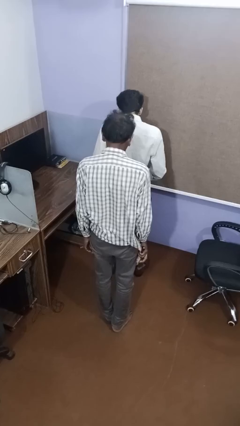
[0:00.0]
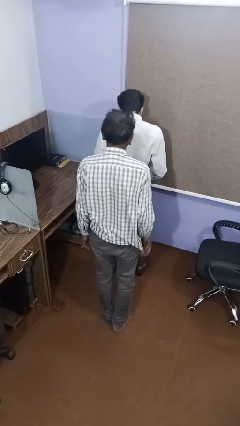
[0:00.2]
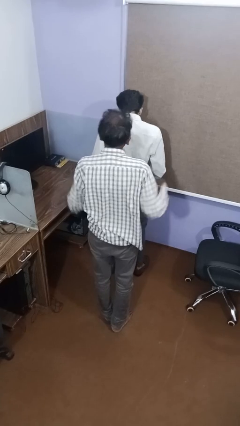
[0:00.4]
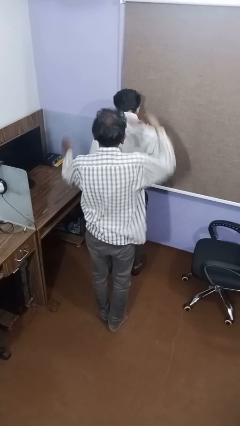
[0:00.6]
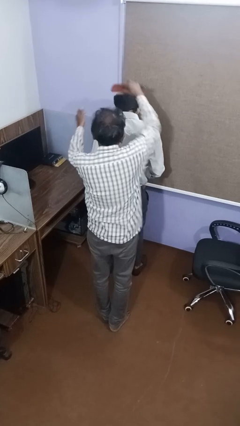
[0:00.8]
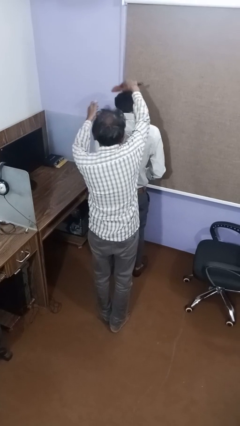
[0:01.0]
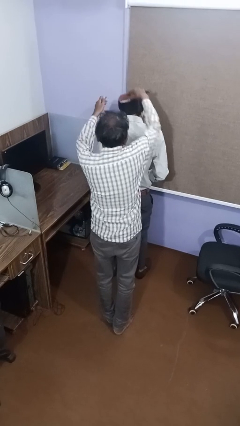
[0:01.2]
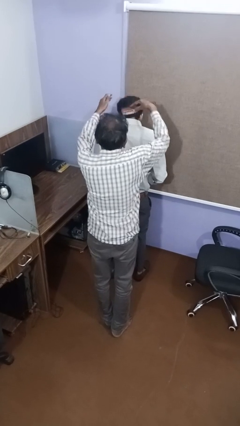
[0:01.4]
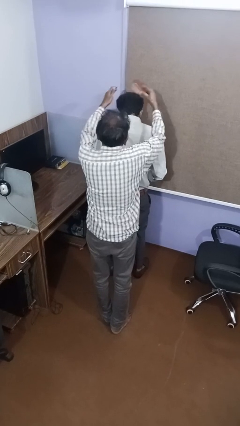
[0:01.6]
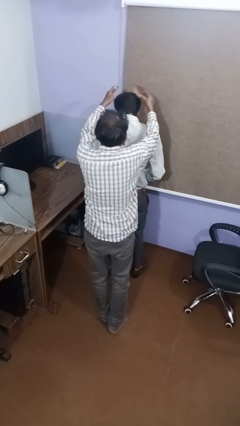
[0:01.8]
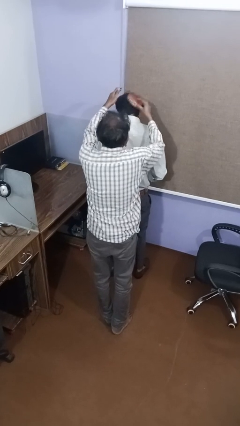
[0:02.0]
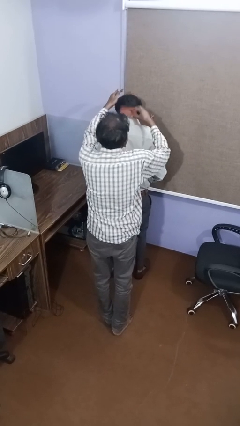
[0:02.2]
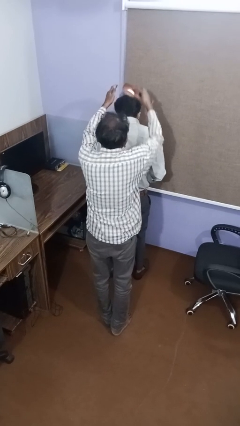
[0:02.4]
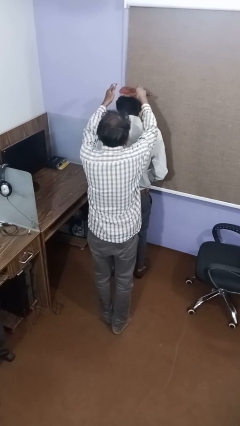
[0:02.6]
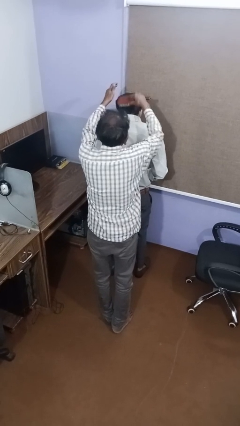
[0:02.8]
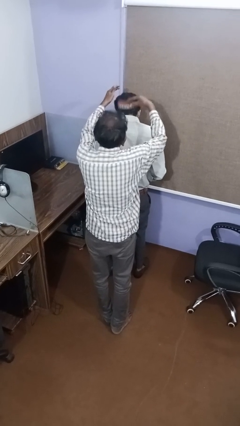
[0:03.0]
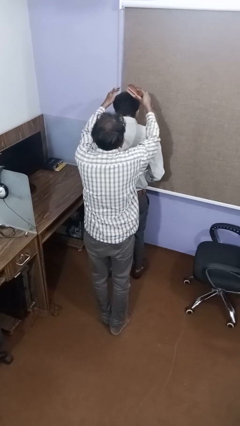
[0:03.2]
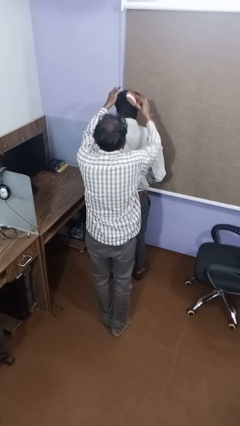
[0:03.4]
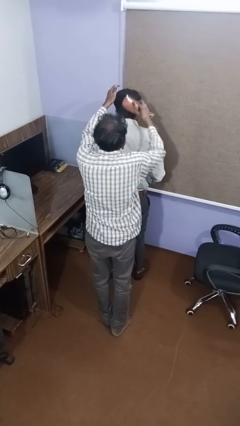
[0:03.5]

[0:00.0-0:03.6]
person brushes hair of person

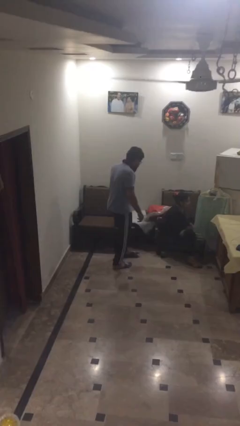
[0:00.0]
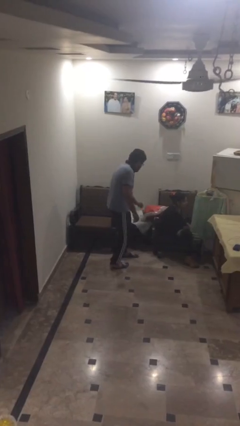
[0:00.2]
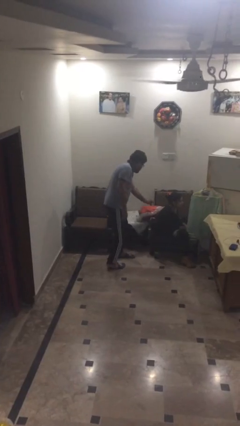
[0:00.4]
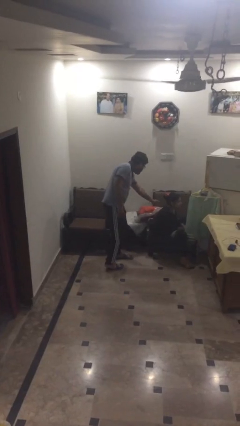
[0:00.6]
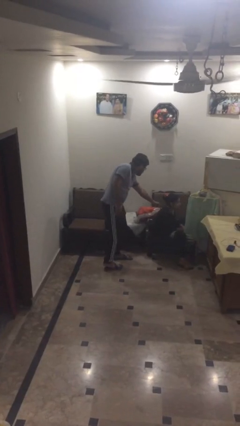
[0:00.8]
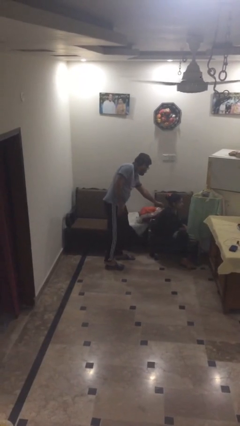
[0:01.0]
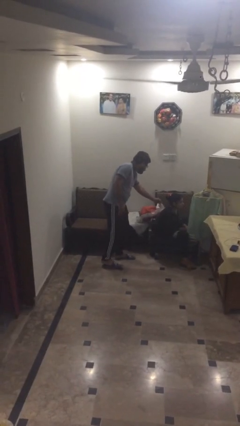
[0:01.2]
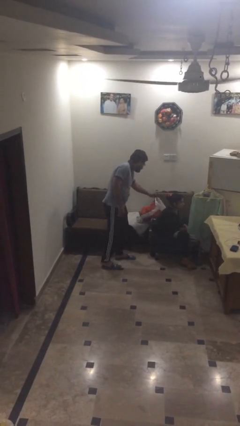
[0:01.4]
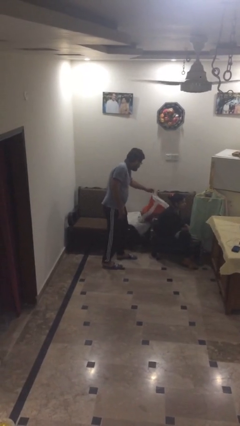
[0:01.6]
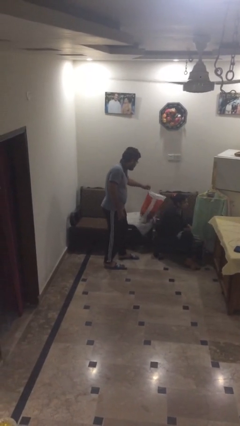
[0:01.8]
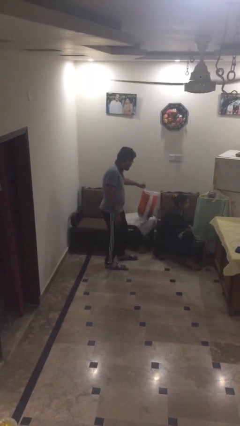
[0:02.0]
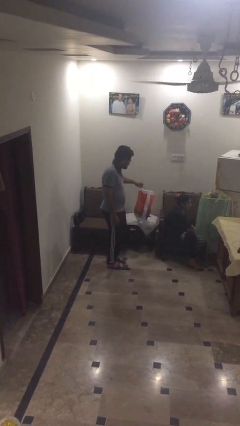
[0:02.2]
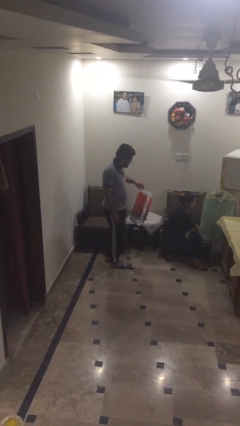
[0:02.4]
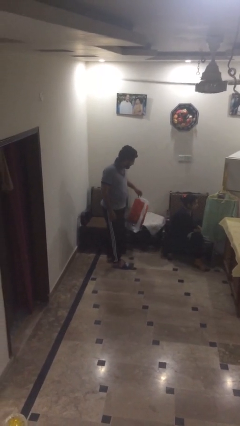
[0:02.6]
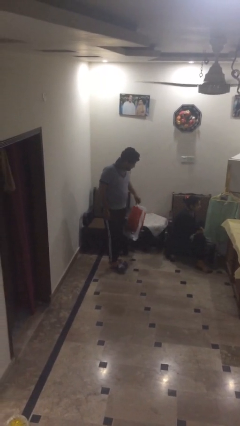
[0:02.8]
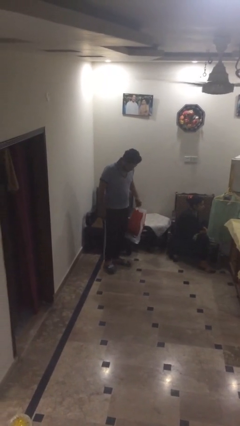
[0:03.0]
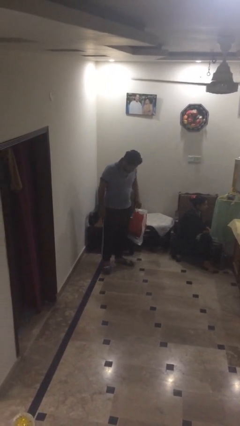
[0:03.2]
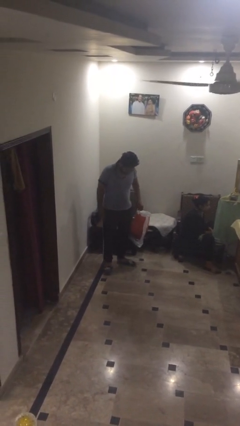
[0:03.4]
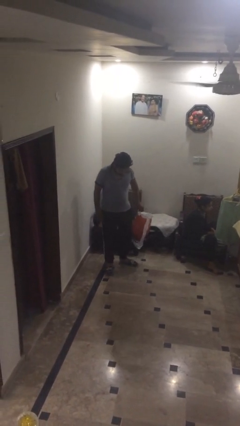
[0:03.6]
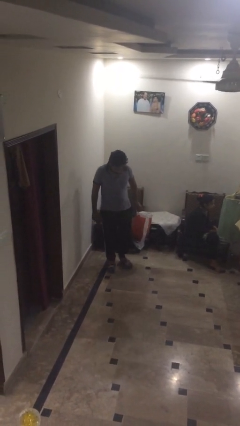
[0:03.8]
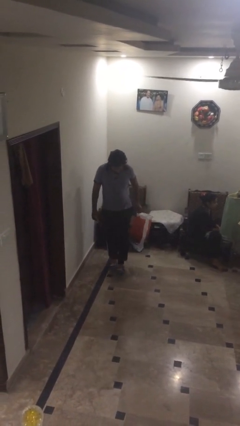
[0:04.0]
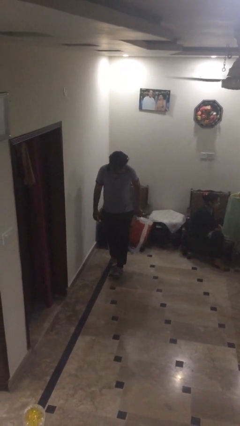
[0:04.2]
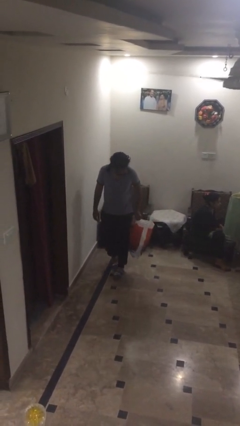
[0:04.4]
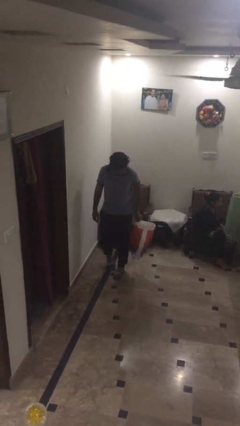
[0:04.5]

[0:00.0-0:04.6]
person steals object from person

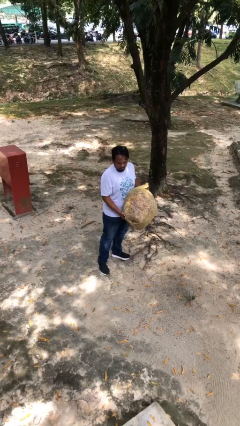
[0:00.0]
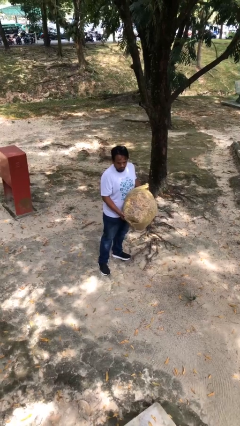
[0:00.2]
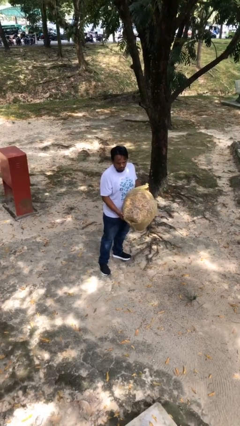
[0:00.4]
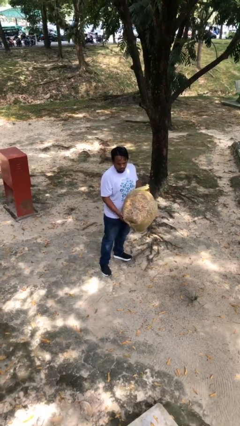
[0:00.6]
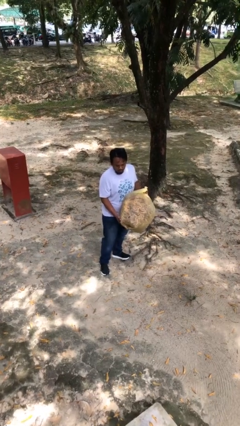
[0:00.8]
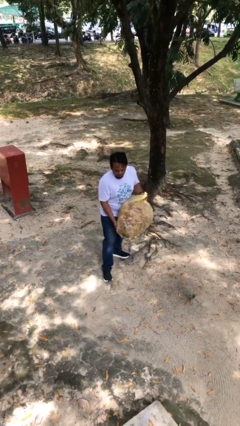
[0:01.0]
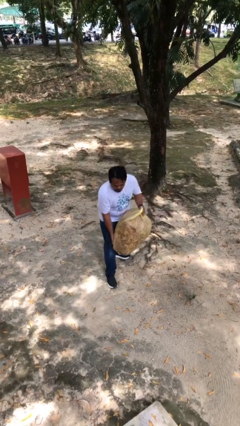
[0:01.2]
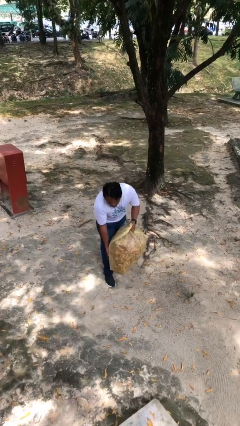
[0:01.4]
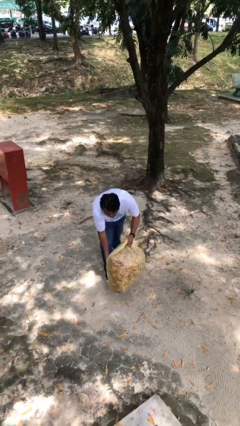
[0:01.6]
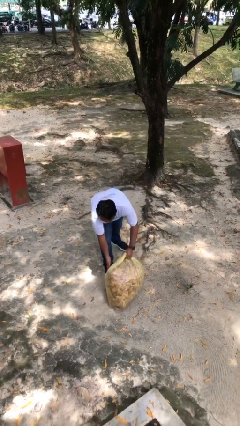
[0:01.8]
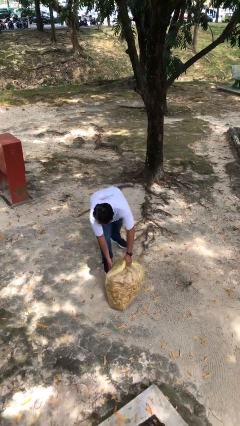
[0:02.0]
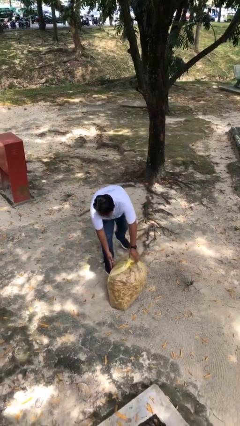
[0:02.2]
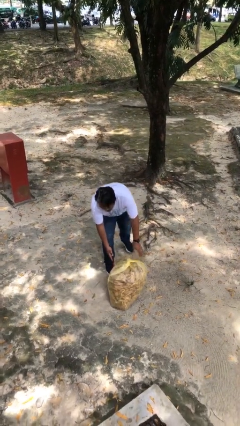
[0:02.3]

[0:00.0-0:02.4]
person puts down object on floor

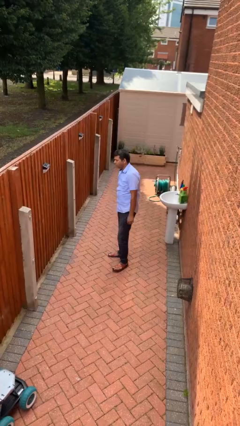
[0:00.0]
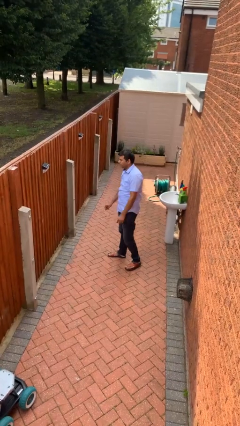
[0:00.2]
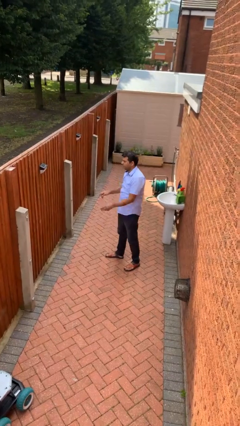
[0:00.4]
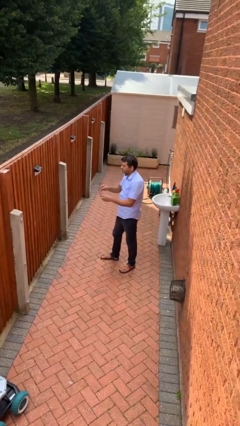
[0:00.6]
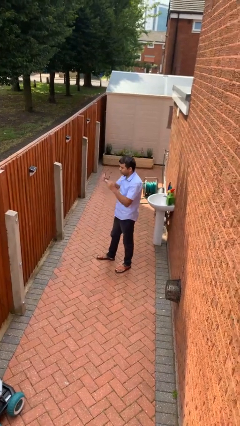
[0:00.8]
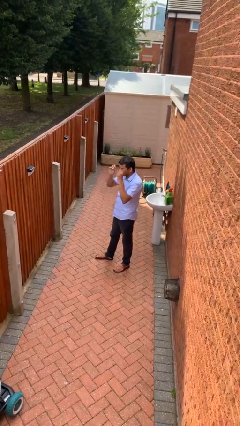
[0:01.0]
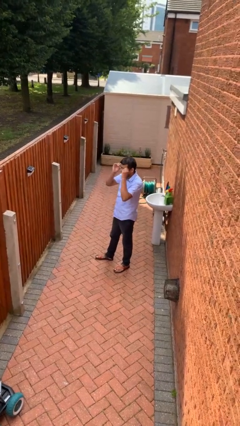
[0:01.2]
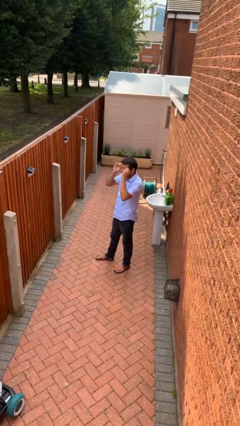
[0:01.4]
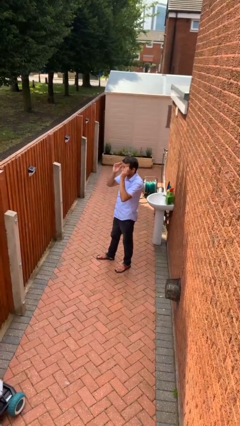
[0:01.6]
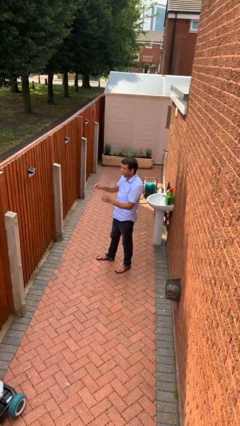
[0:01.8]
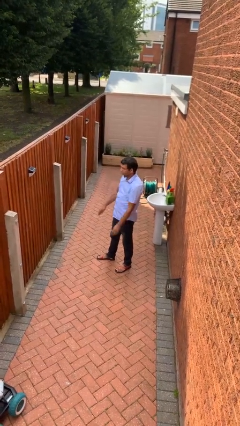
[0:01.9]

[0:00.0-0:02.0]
person puts on glasses

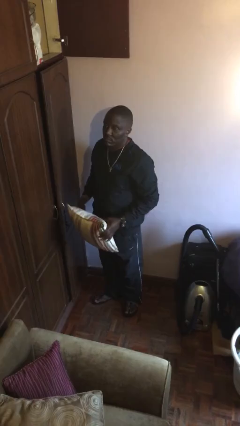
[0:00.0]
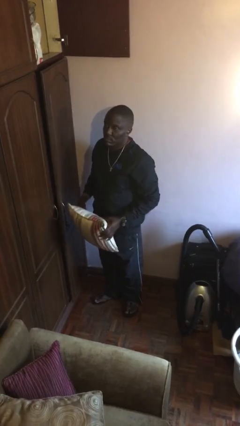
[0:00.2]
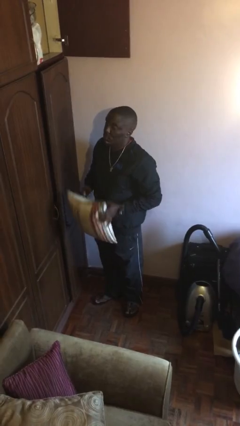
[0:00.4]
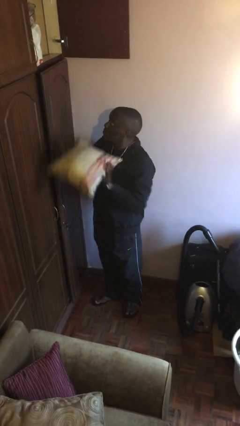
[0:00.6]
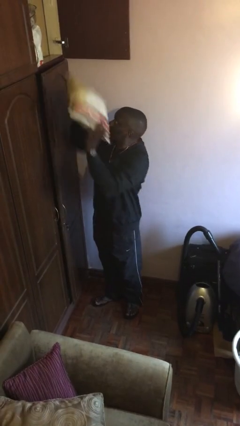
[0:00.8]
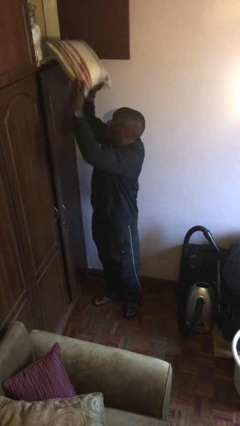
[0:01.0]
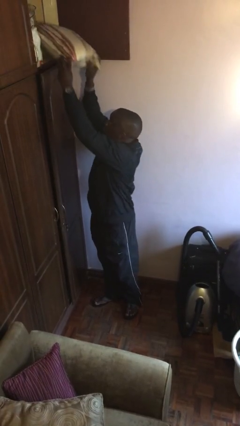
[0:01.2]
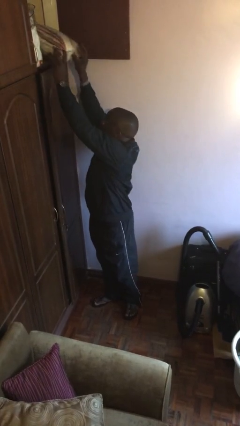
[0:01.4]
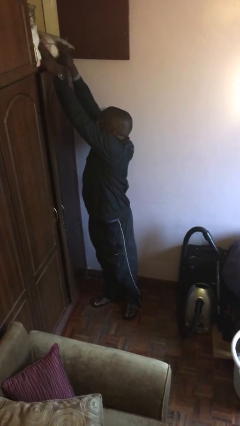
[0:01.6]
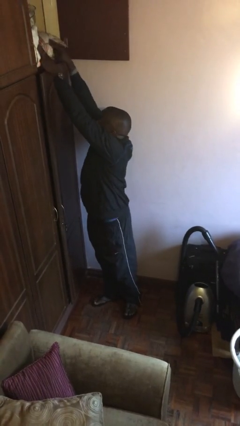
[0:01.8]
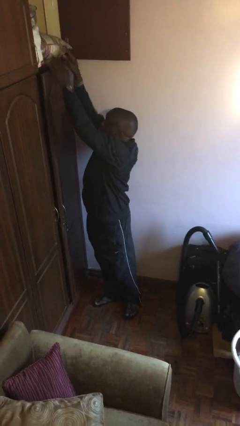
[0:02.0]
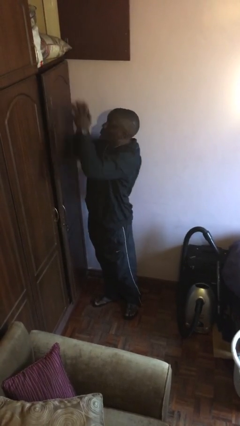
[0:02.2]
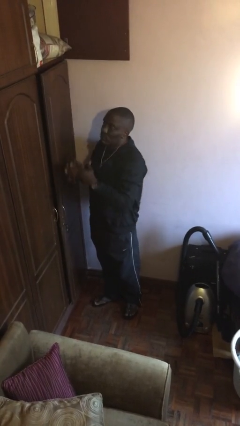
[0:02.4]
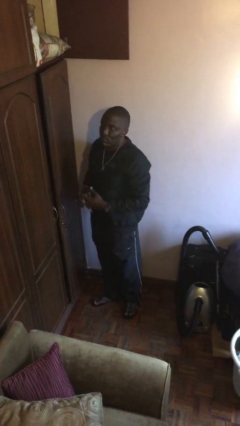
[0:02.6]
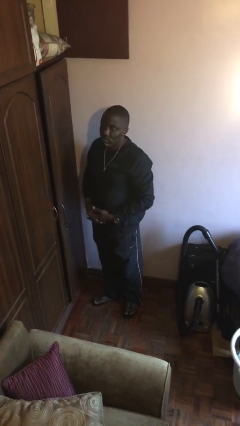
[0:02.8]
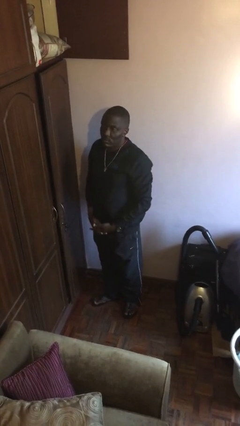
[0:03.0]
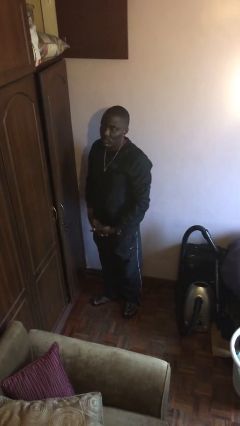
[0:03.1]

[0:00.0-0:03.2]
person puts down object on shelf

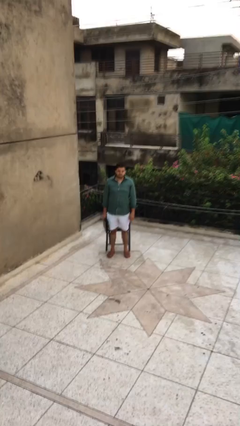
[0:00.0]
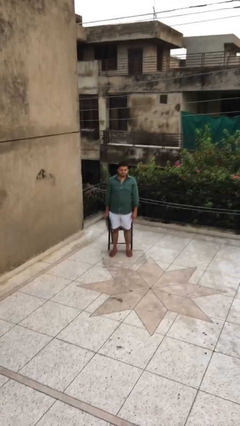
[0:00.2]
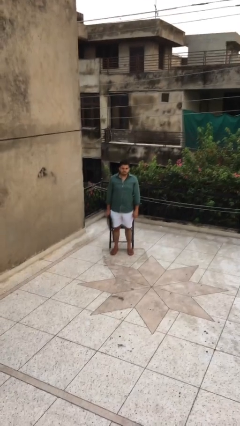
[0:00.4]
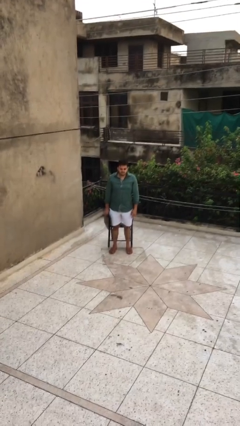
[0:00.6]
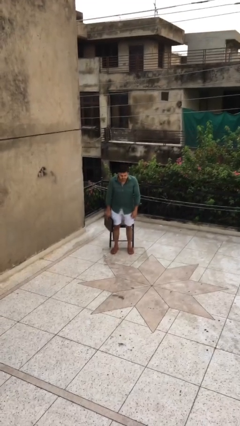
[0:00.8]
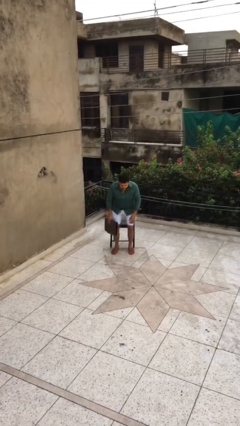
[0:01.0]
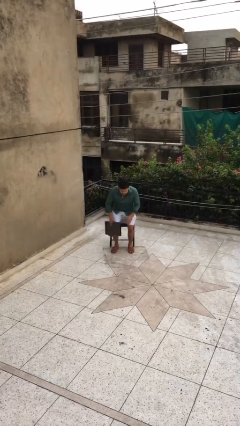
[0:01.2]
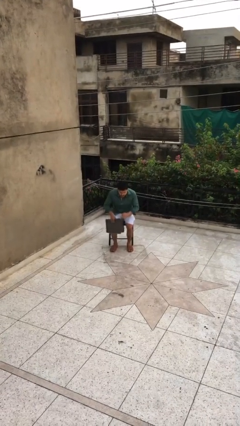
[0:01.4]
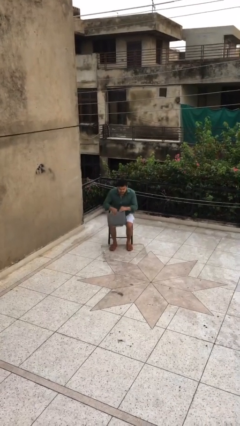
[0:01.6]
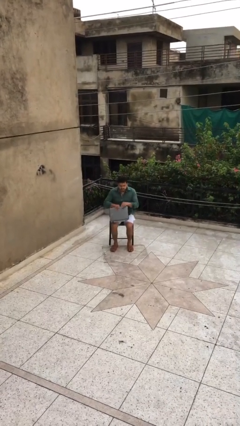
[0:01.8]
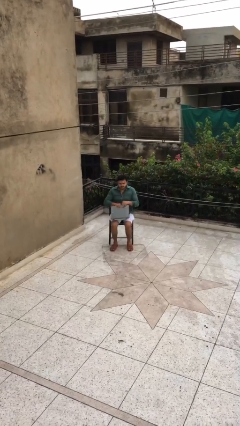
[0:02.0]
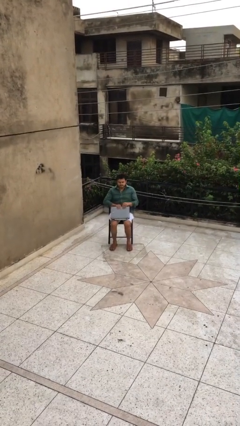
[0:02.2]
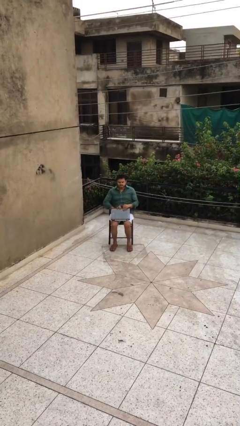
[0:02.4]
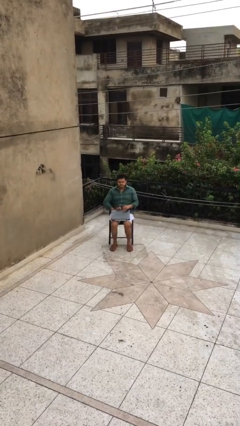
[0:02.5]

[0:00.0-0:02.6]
person sits down
